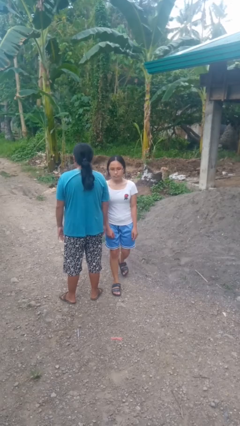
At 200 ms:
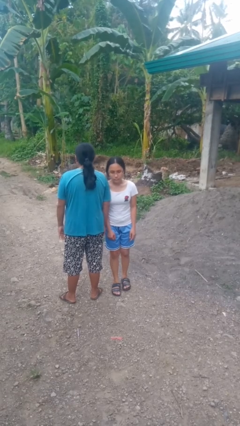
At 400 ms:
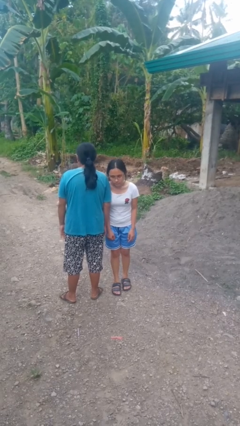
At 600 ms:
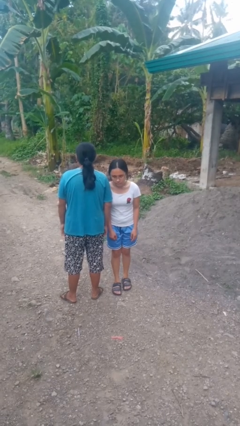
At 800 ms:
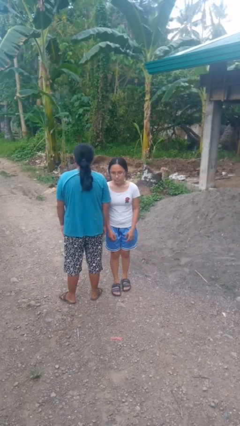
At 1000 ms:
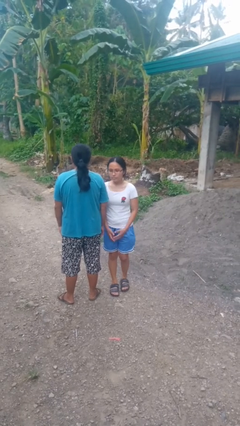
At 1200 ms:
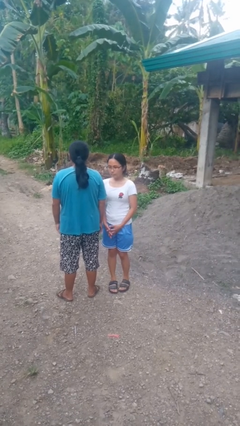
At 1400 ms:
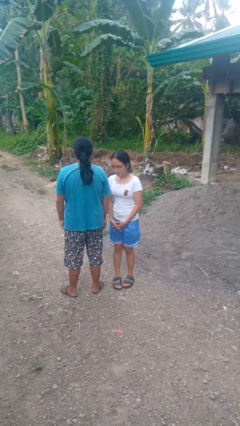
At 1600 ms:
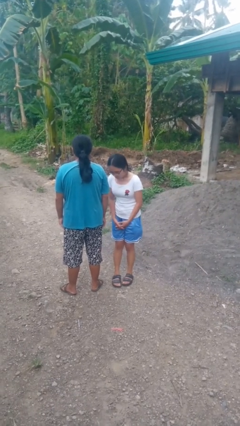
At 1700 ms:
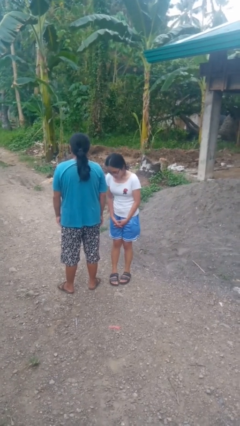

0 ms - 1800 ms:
person bumps into person

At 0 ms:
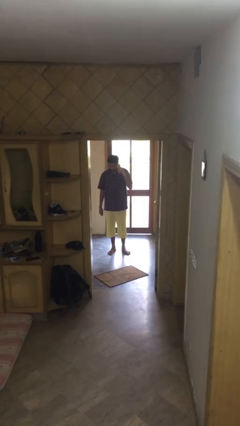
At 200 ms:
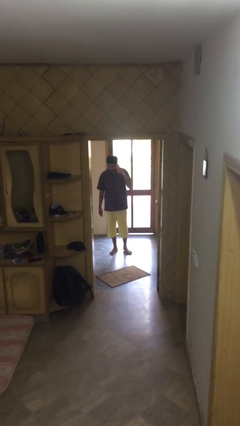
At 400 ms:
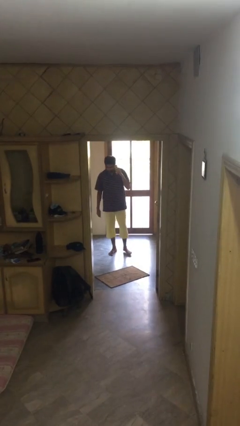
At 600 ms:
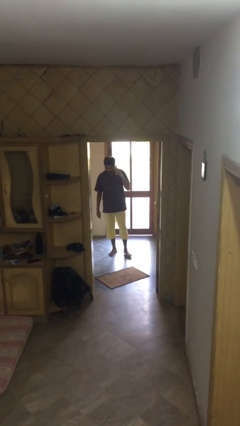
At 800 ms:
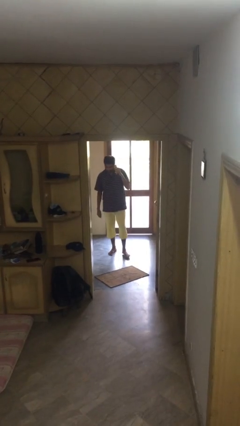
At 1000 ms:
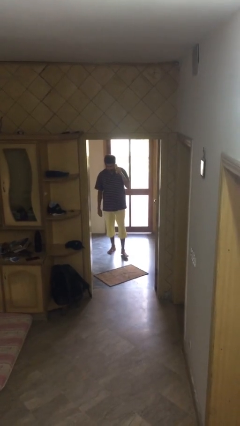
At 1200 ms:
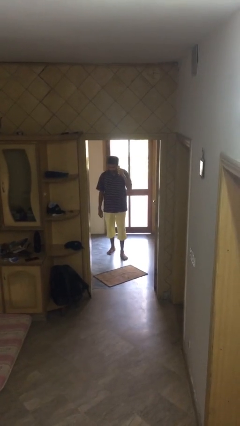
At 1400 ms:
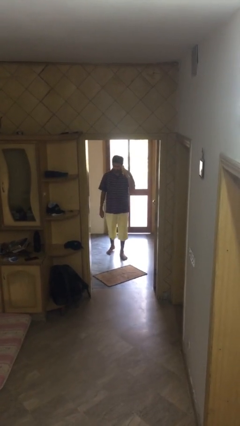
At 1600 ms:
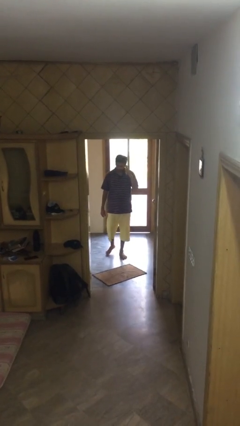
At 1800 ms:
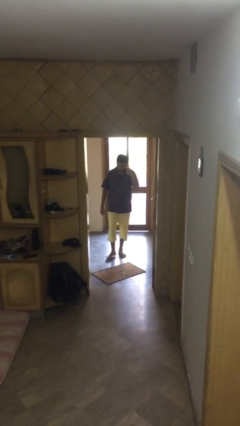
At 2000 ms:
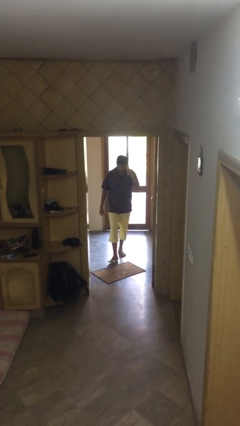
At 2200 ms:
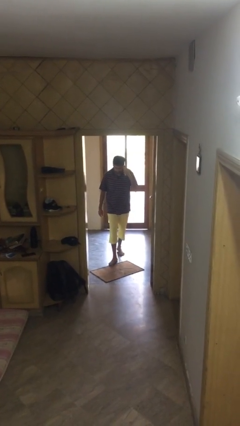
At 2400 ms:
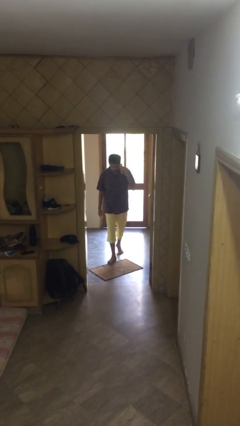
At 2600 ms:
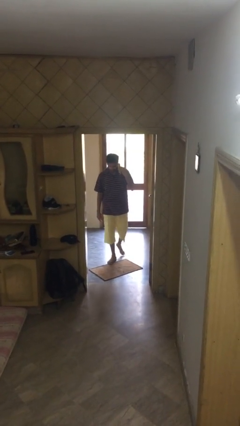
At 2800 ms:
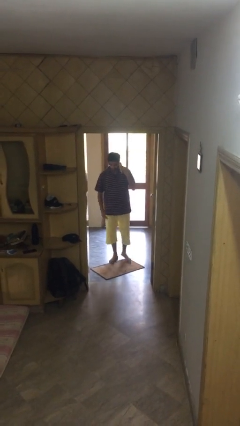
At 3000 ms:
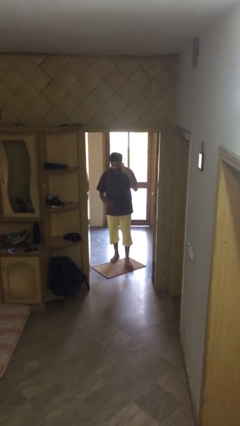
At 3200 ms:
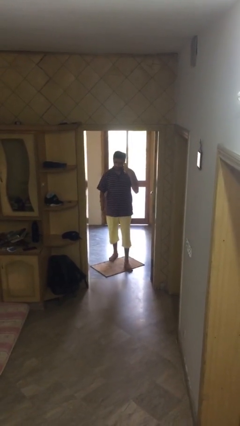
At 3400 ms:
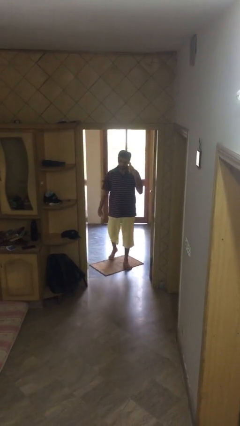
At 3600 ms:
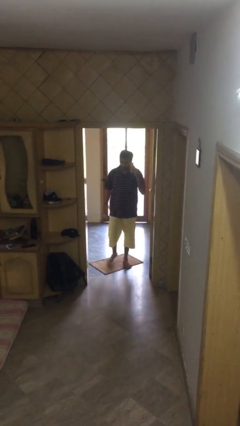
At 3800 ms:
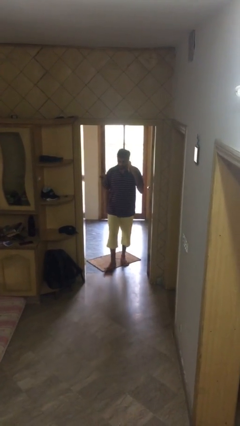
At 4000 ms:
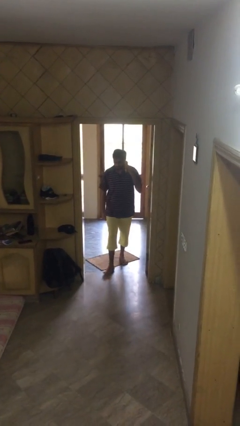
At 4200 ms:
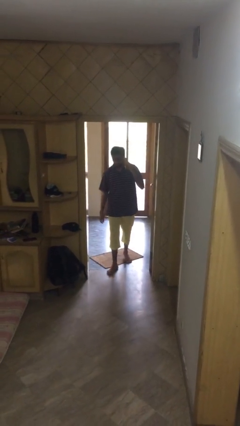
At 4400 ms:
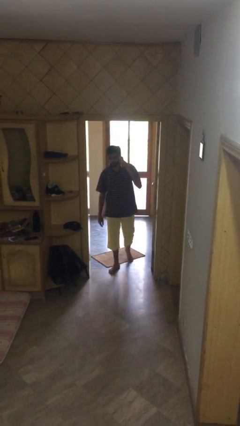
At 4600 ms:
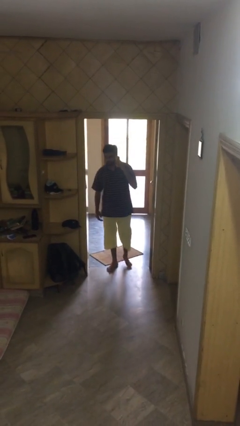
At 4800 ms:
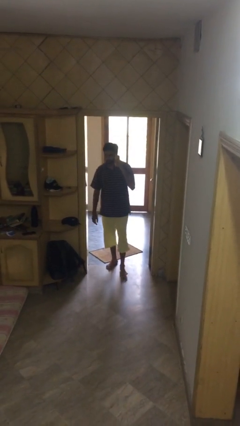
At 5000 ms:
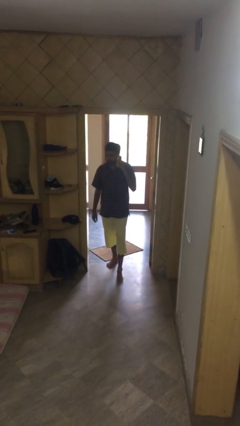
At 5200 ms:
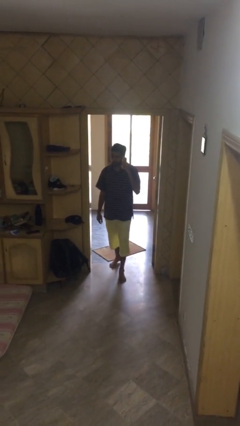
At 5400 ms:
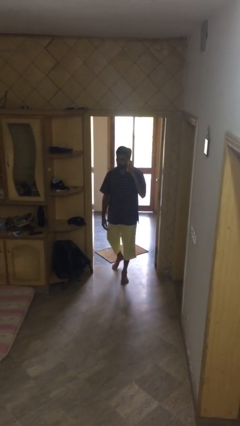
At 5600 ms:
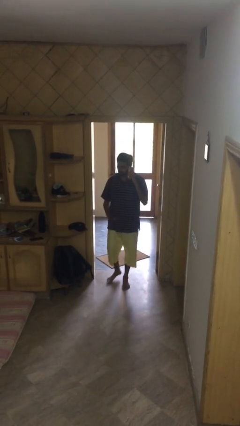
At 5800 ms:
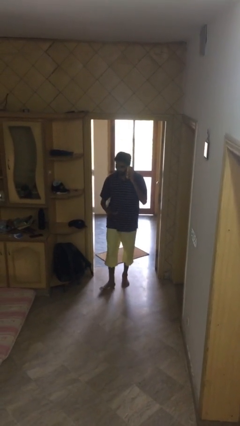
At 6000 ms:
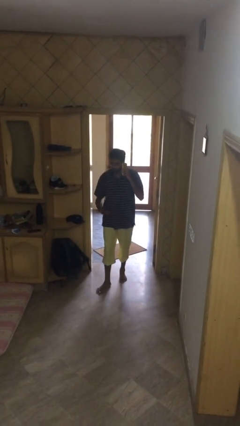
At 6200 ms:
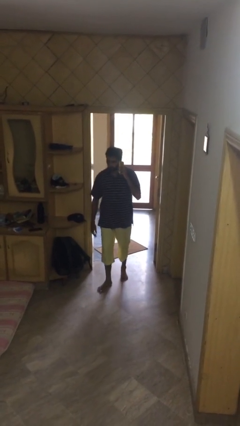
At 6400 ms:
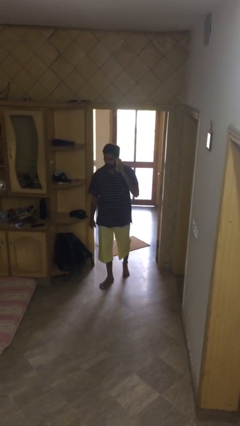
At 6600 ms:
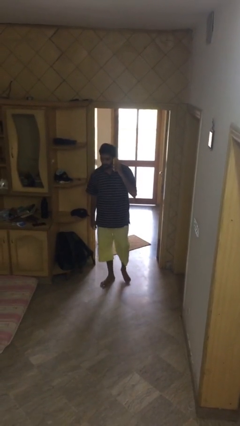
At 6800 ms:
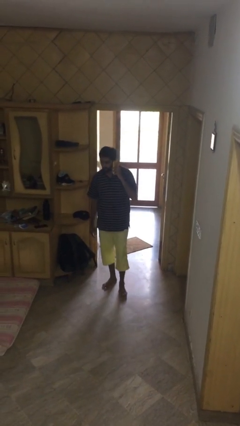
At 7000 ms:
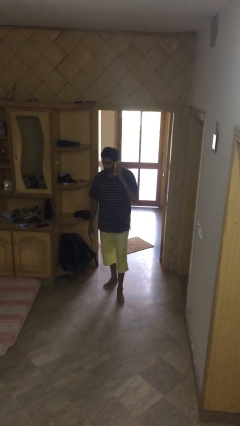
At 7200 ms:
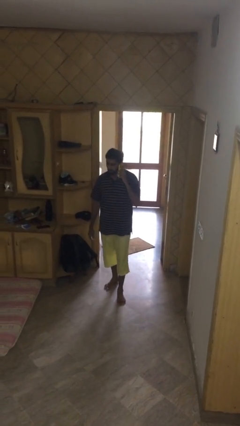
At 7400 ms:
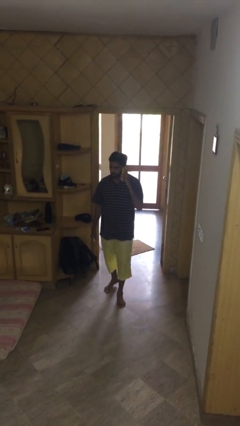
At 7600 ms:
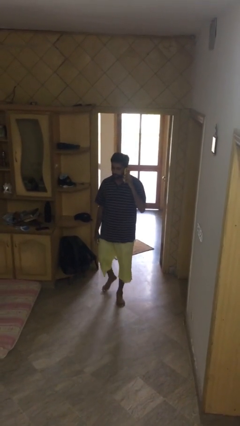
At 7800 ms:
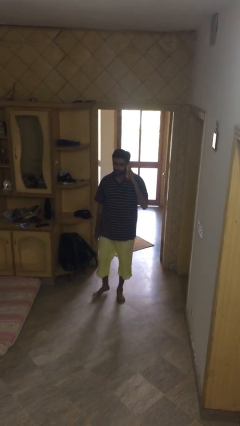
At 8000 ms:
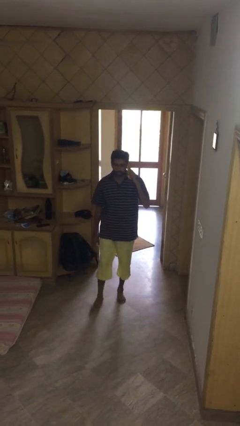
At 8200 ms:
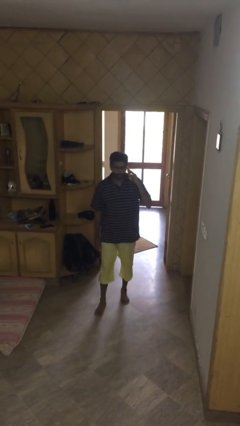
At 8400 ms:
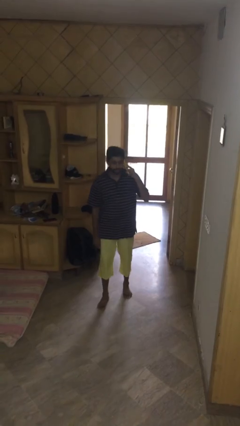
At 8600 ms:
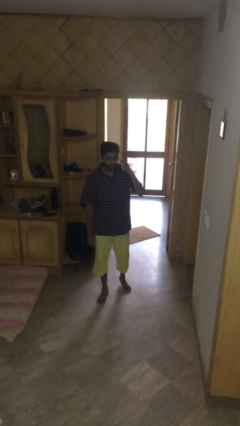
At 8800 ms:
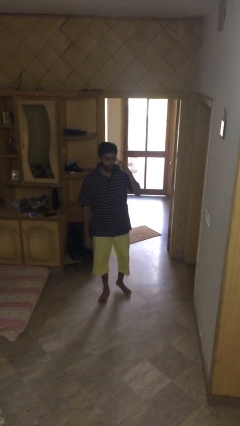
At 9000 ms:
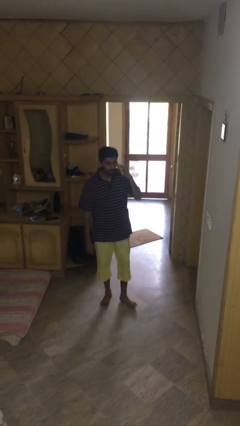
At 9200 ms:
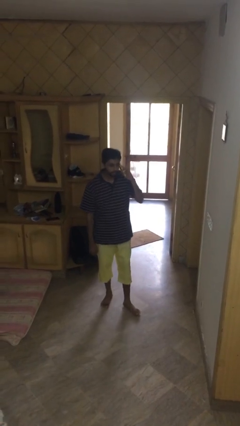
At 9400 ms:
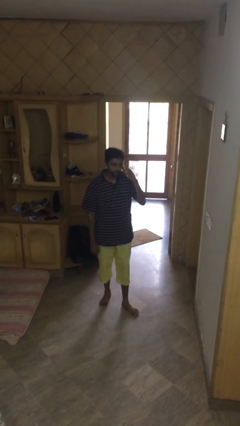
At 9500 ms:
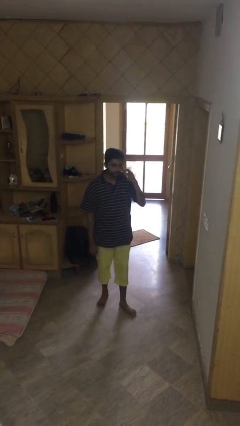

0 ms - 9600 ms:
person enters scene through structure

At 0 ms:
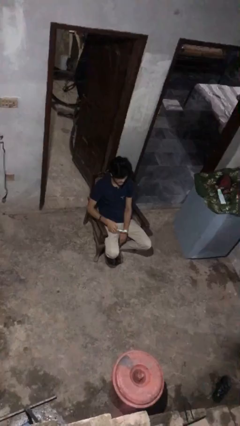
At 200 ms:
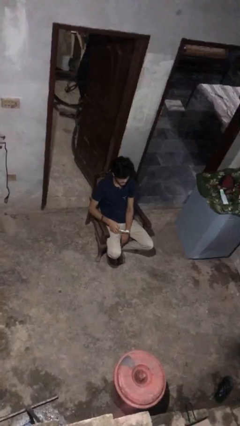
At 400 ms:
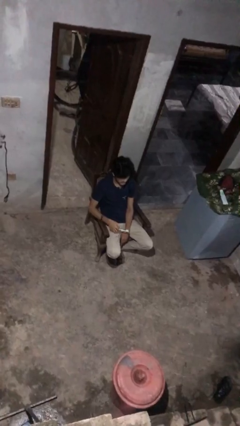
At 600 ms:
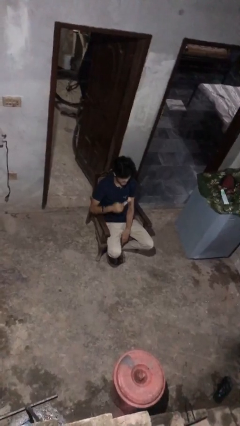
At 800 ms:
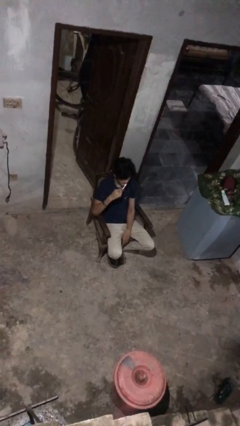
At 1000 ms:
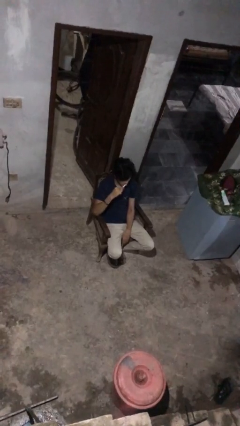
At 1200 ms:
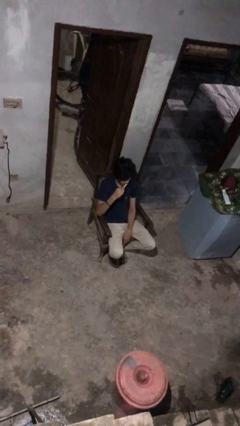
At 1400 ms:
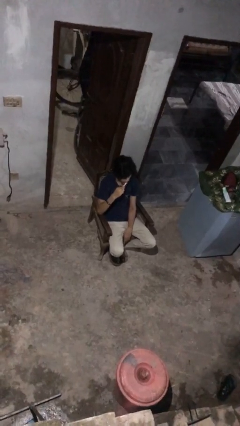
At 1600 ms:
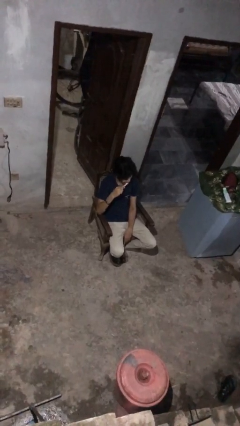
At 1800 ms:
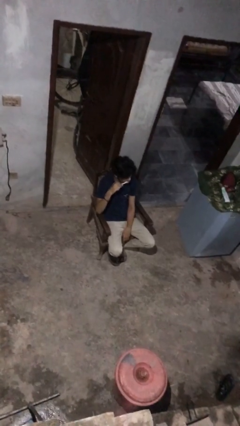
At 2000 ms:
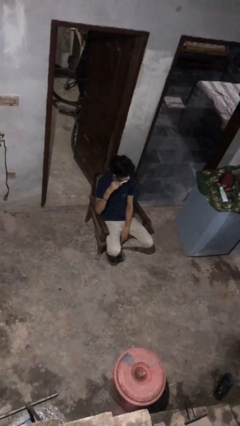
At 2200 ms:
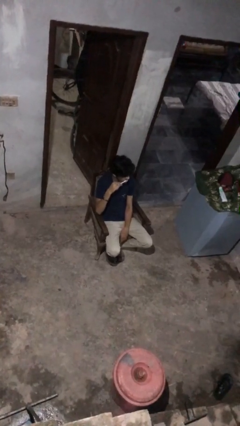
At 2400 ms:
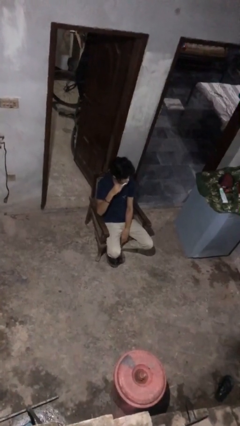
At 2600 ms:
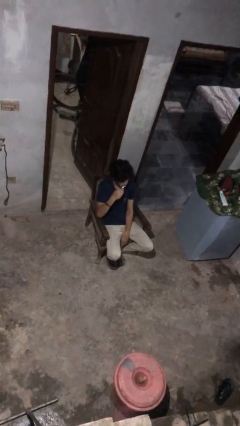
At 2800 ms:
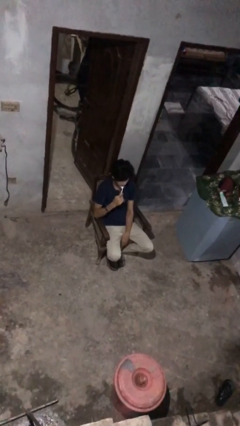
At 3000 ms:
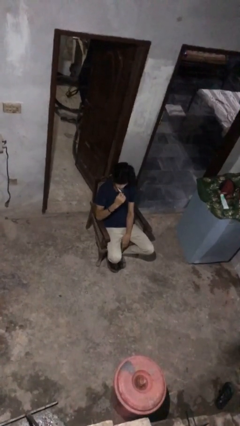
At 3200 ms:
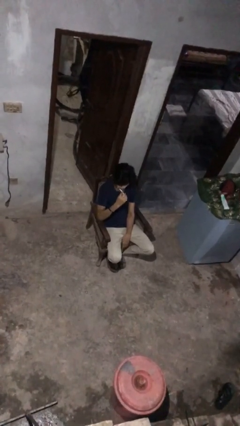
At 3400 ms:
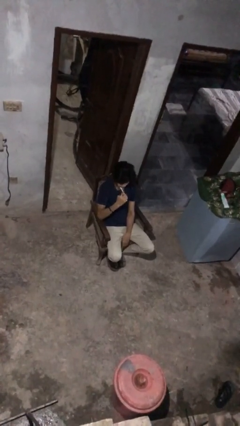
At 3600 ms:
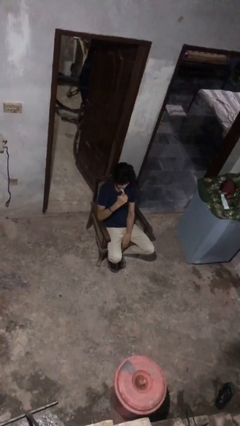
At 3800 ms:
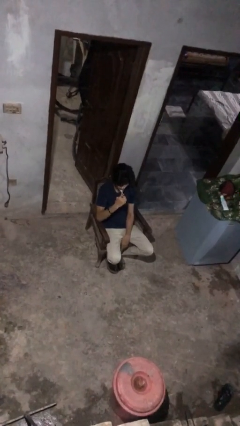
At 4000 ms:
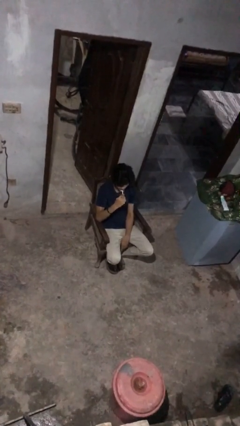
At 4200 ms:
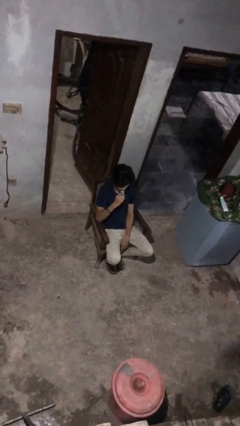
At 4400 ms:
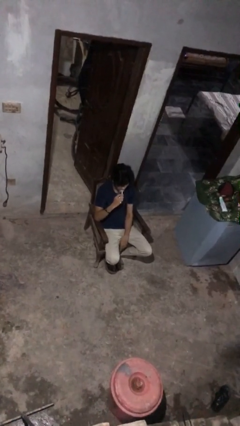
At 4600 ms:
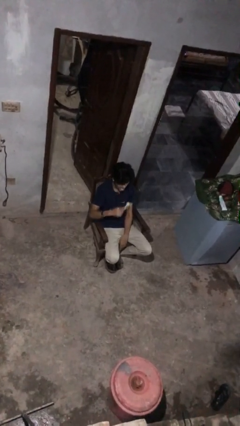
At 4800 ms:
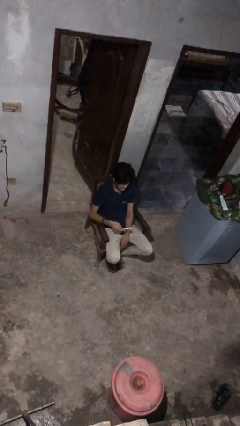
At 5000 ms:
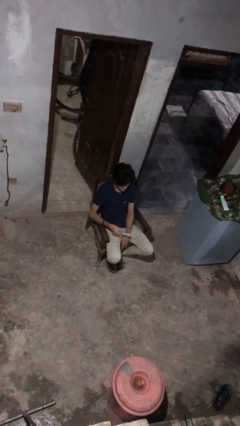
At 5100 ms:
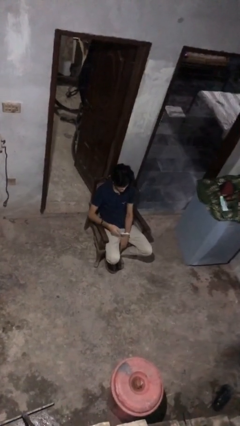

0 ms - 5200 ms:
person brushes teeth

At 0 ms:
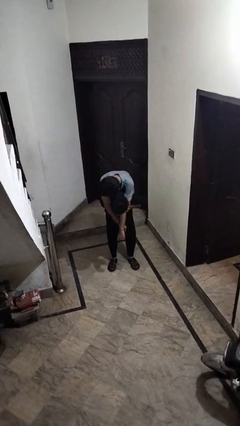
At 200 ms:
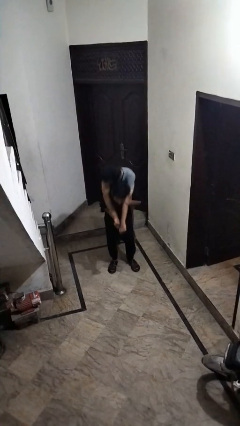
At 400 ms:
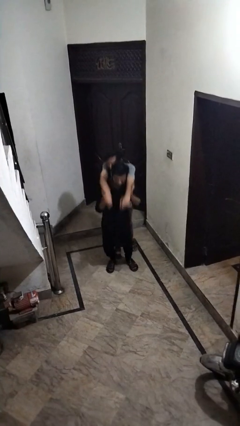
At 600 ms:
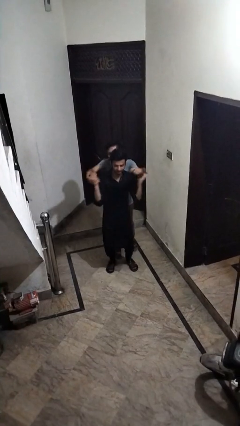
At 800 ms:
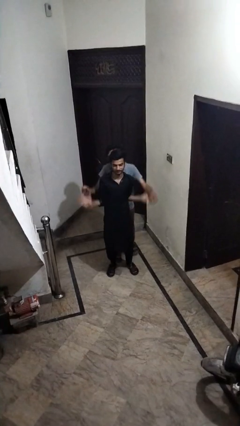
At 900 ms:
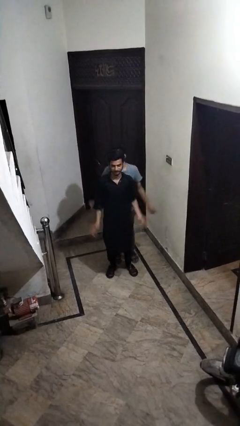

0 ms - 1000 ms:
person puts down person

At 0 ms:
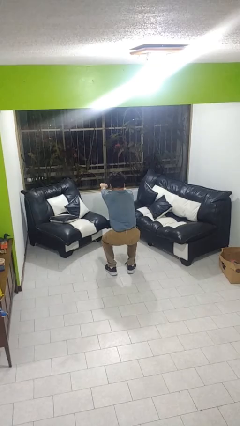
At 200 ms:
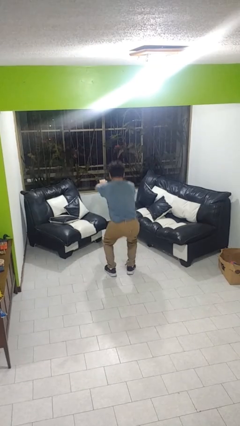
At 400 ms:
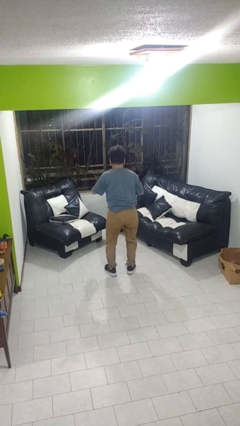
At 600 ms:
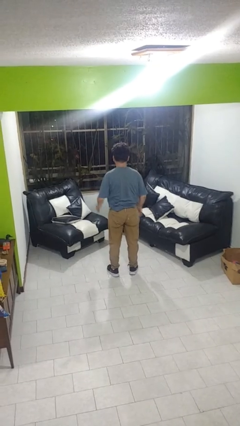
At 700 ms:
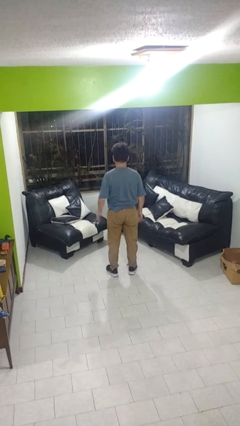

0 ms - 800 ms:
person stands up
